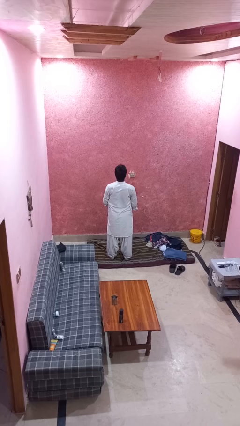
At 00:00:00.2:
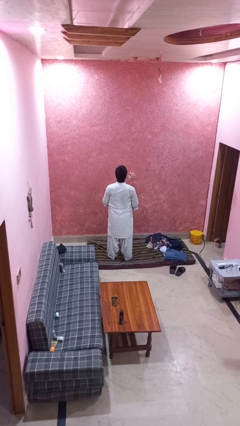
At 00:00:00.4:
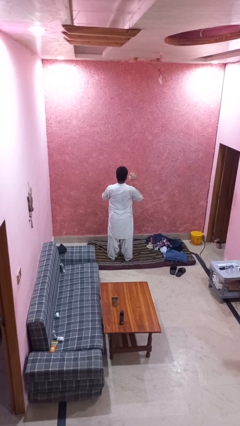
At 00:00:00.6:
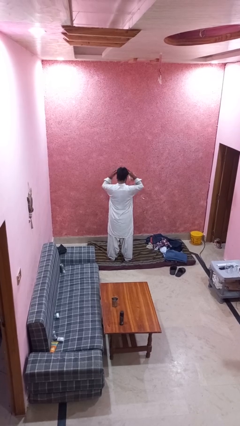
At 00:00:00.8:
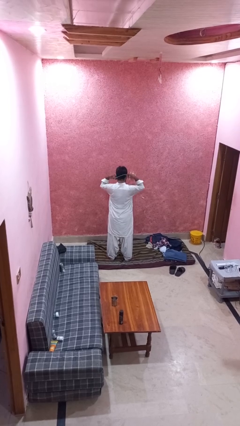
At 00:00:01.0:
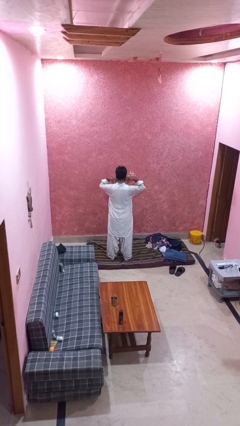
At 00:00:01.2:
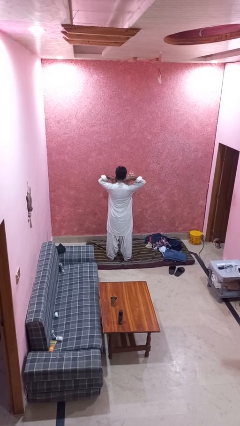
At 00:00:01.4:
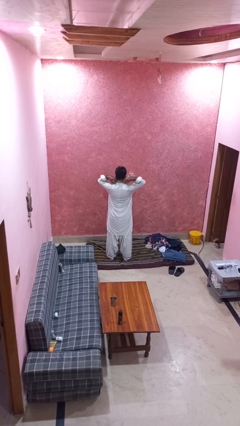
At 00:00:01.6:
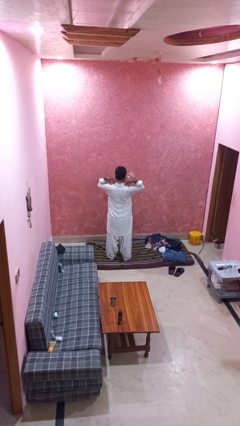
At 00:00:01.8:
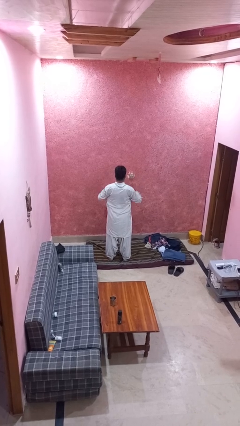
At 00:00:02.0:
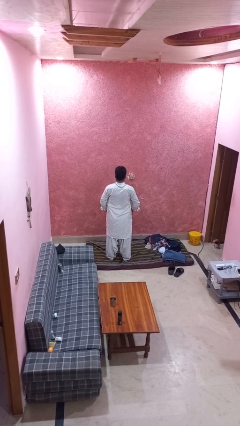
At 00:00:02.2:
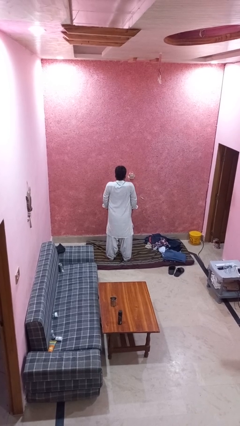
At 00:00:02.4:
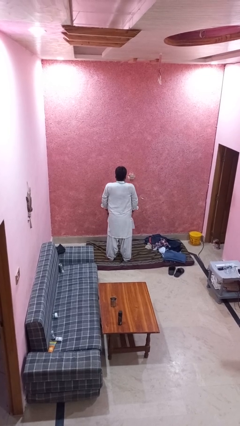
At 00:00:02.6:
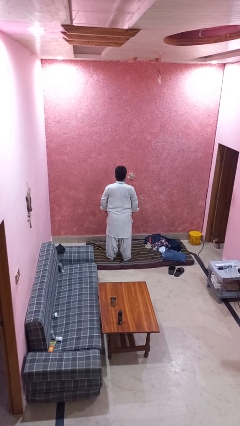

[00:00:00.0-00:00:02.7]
person puts on necklace

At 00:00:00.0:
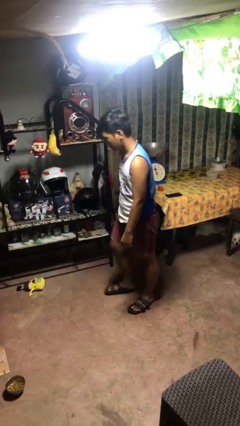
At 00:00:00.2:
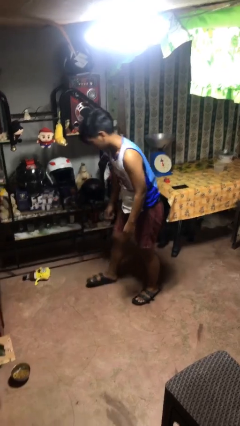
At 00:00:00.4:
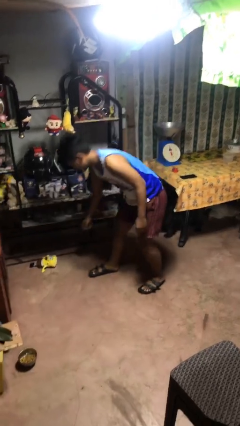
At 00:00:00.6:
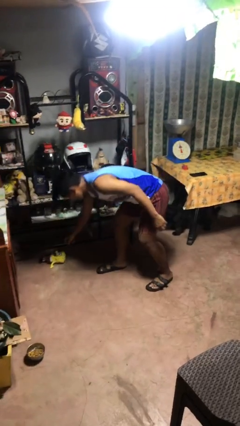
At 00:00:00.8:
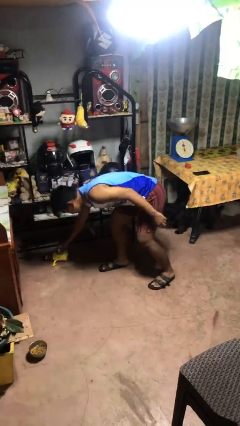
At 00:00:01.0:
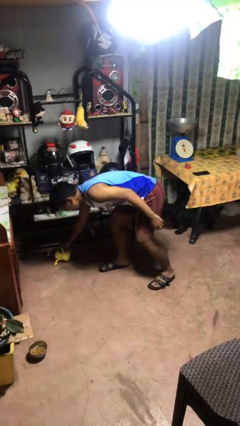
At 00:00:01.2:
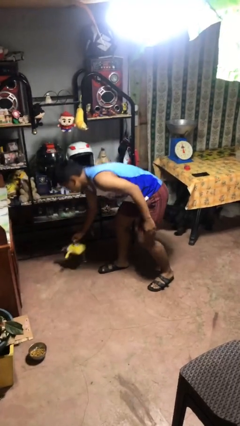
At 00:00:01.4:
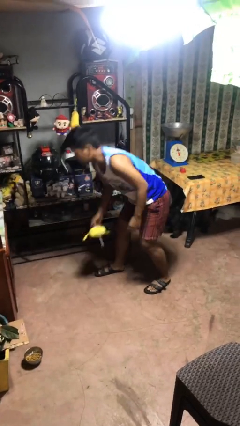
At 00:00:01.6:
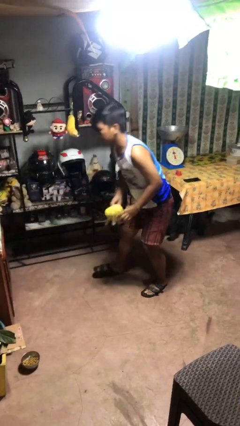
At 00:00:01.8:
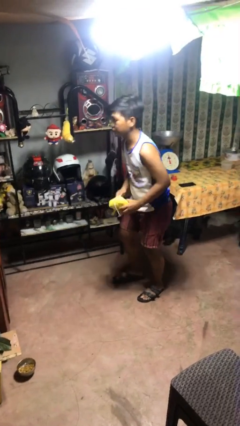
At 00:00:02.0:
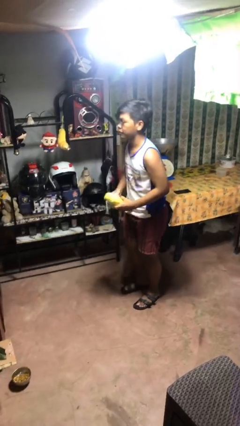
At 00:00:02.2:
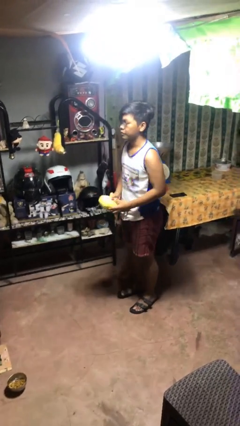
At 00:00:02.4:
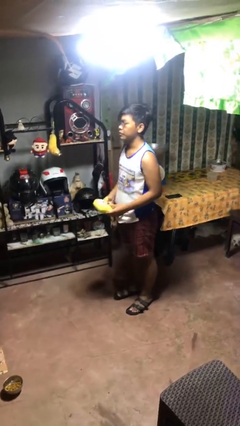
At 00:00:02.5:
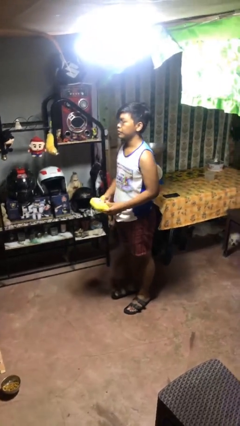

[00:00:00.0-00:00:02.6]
person picks up object from floor

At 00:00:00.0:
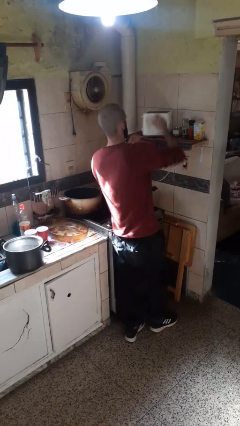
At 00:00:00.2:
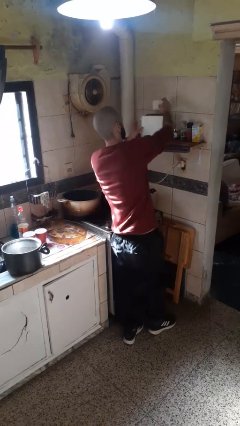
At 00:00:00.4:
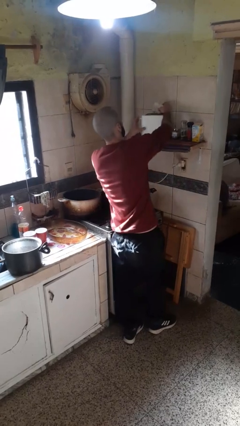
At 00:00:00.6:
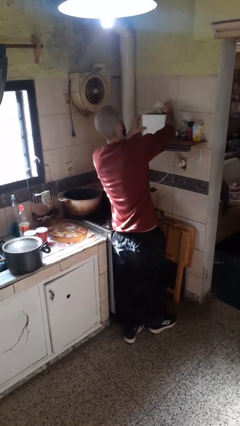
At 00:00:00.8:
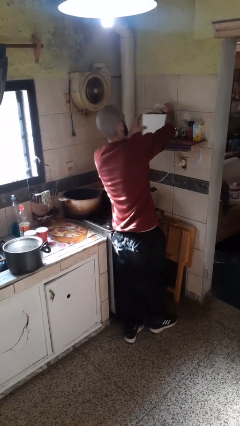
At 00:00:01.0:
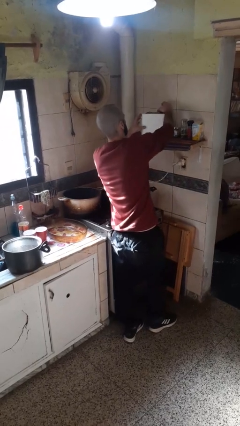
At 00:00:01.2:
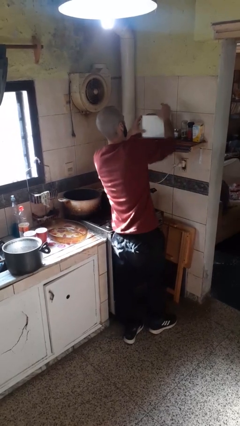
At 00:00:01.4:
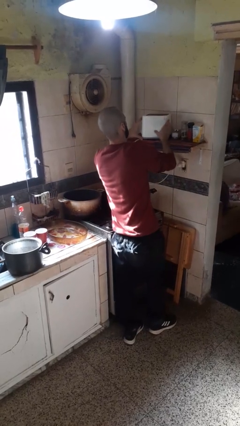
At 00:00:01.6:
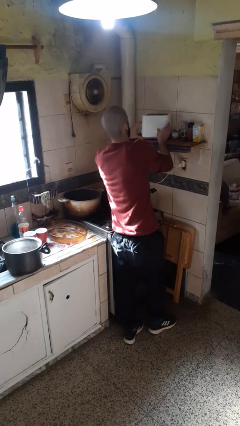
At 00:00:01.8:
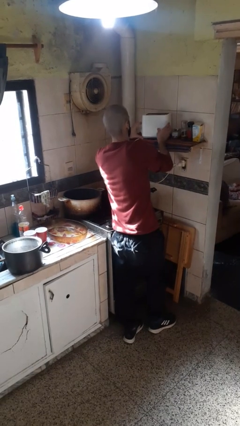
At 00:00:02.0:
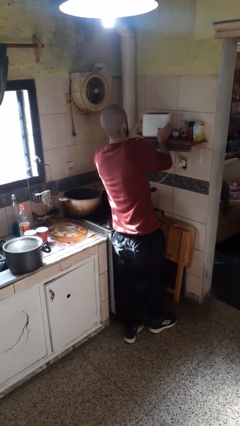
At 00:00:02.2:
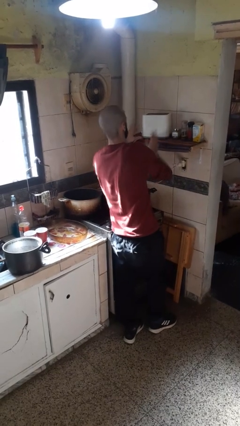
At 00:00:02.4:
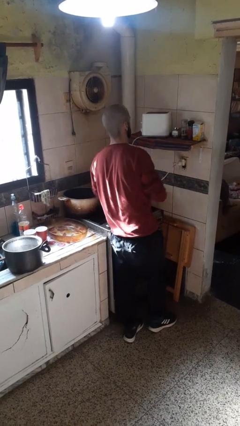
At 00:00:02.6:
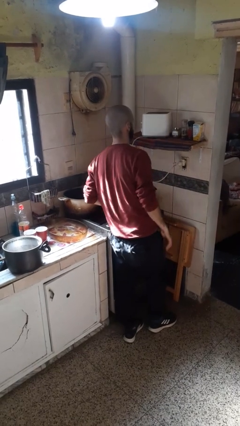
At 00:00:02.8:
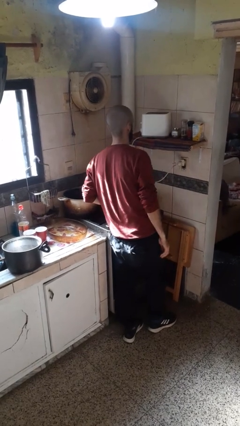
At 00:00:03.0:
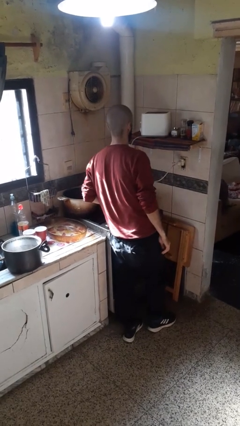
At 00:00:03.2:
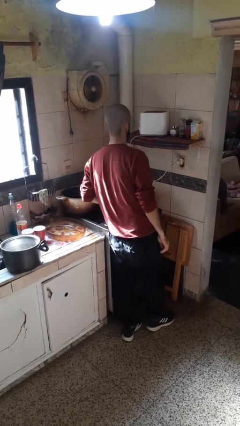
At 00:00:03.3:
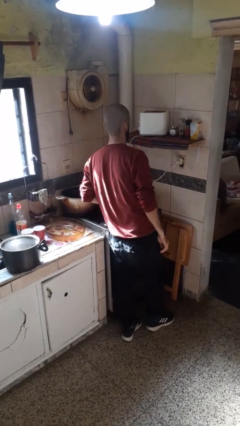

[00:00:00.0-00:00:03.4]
person puts object into toaster

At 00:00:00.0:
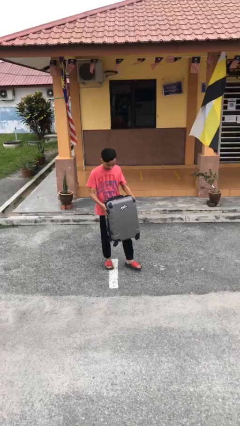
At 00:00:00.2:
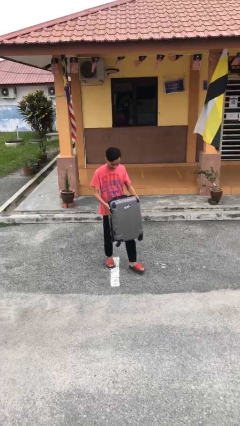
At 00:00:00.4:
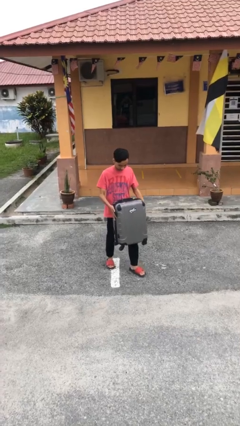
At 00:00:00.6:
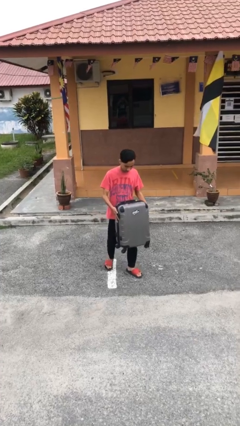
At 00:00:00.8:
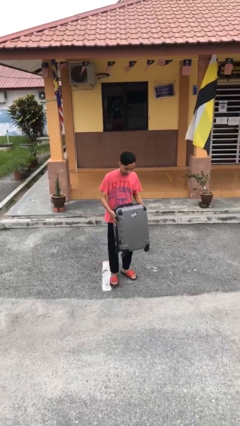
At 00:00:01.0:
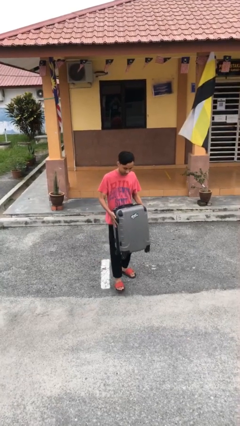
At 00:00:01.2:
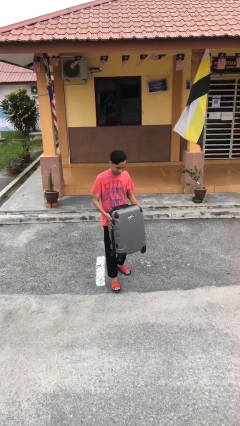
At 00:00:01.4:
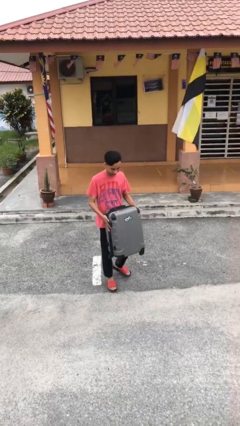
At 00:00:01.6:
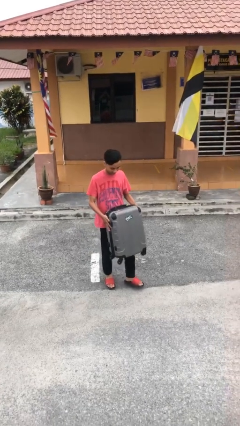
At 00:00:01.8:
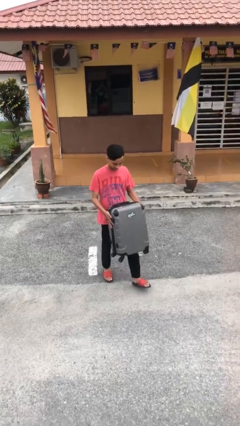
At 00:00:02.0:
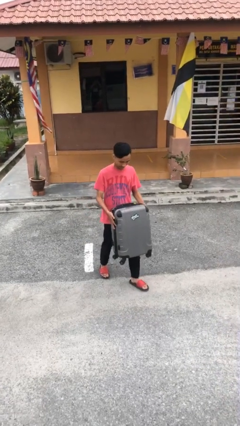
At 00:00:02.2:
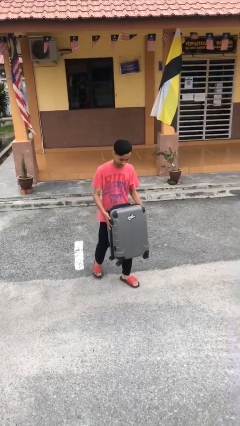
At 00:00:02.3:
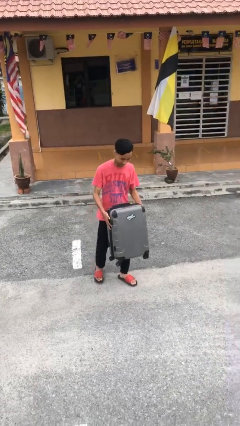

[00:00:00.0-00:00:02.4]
person carries heavy object

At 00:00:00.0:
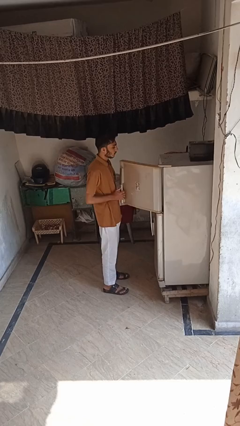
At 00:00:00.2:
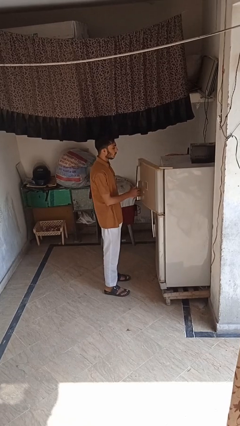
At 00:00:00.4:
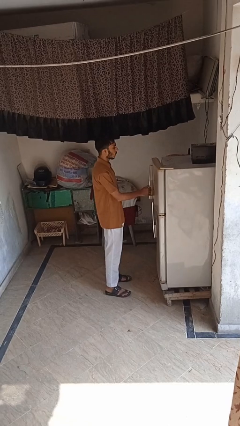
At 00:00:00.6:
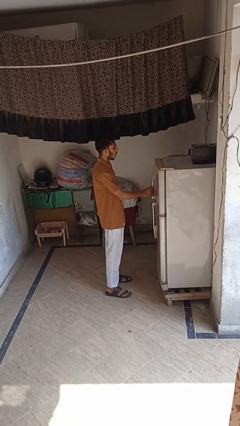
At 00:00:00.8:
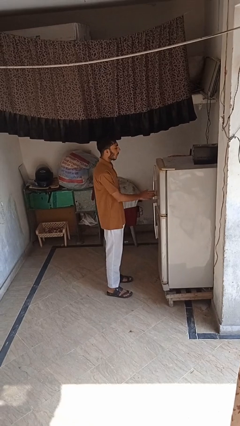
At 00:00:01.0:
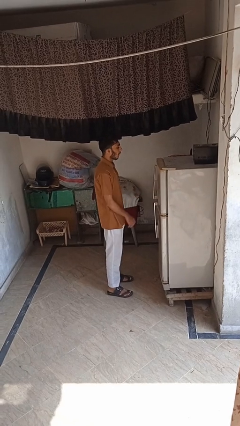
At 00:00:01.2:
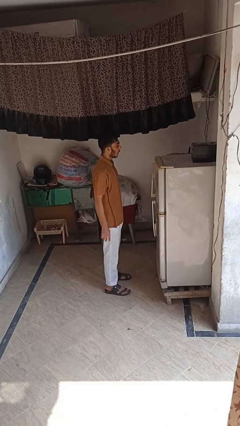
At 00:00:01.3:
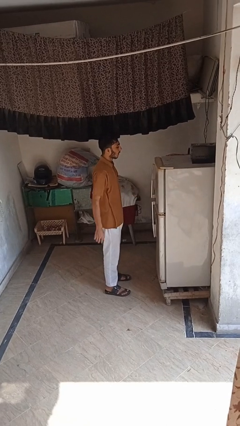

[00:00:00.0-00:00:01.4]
person closes refrigerator

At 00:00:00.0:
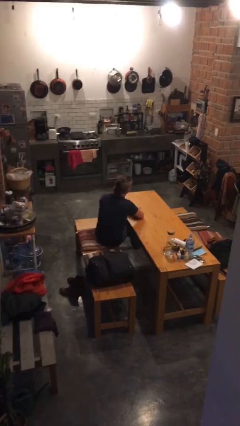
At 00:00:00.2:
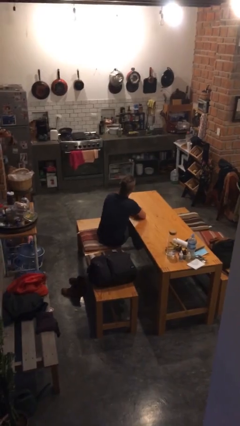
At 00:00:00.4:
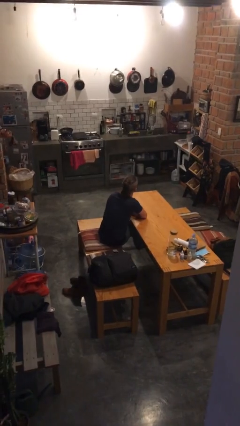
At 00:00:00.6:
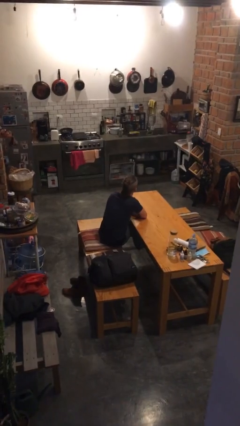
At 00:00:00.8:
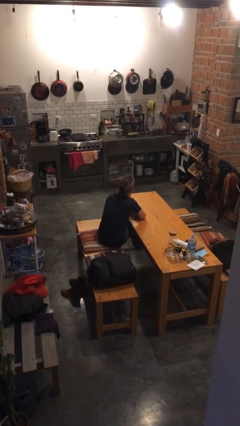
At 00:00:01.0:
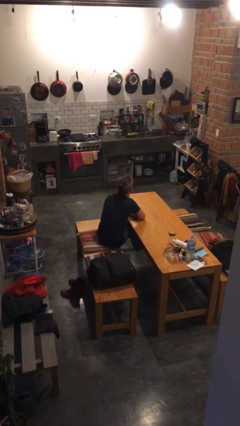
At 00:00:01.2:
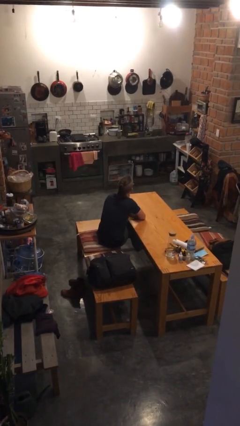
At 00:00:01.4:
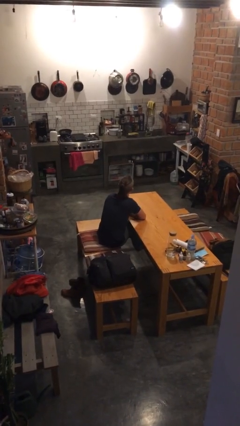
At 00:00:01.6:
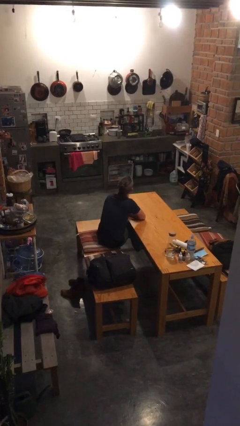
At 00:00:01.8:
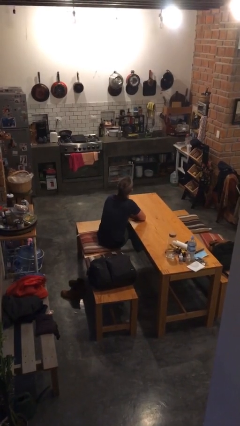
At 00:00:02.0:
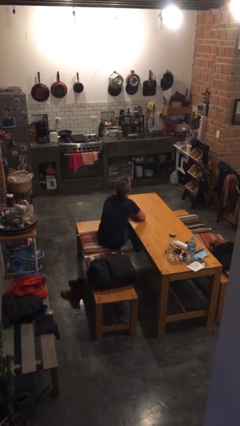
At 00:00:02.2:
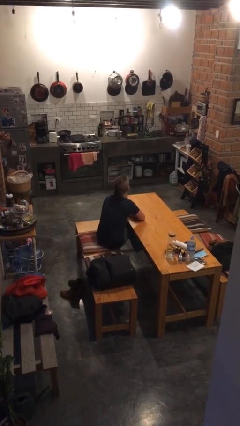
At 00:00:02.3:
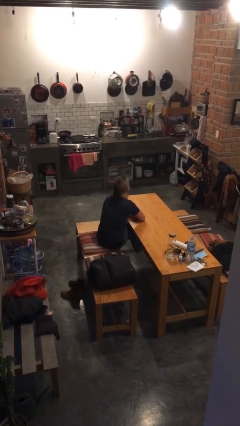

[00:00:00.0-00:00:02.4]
person licks fingers

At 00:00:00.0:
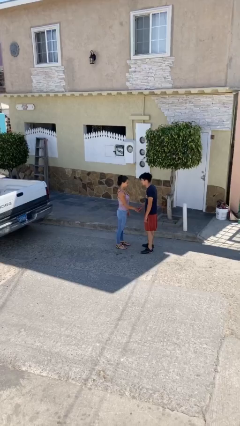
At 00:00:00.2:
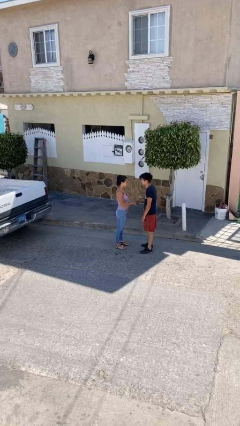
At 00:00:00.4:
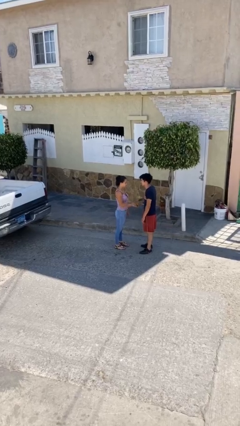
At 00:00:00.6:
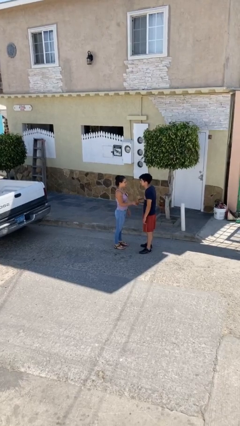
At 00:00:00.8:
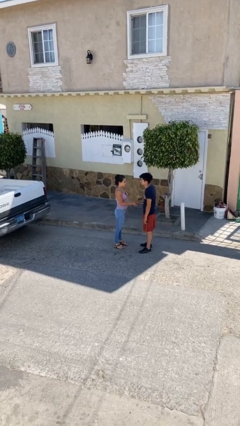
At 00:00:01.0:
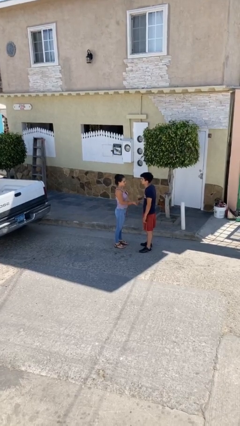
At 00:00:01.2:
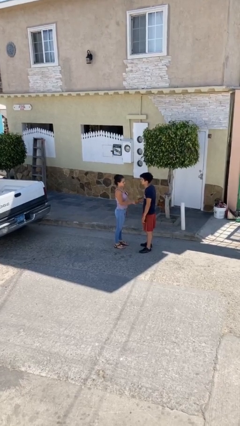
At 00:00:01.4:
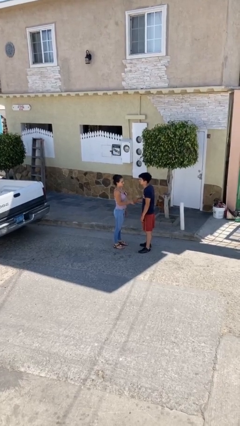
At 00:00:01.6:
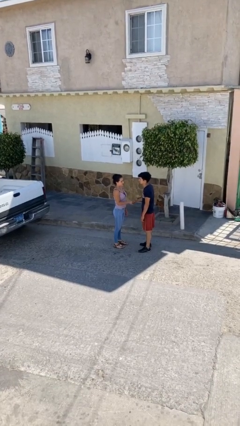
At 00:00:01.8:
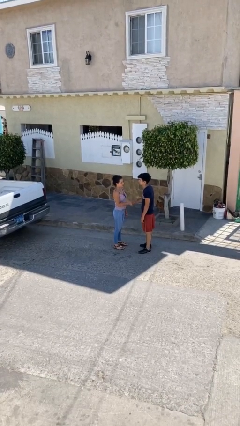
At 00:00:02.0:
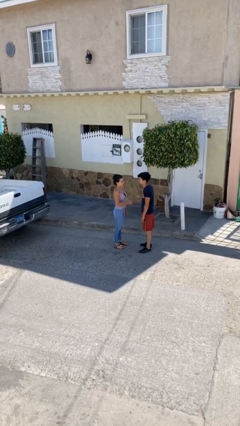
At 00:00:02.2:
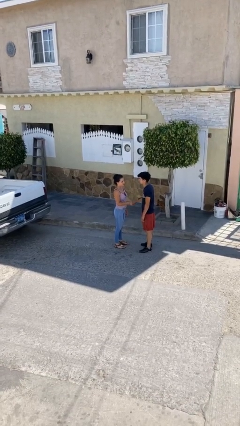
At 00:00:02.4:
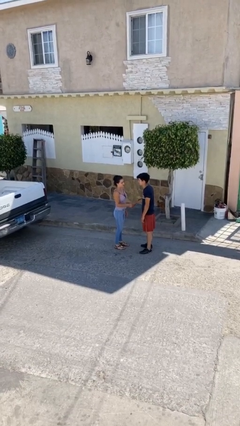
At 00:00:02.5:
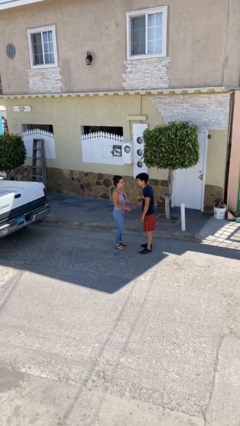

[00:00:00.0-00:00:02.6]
person shakes hand
